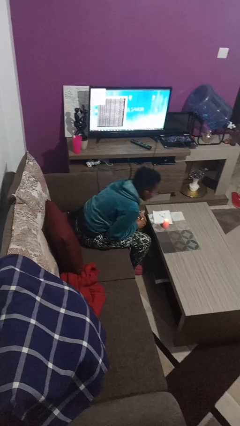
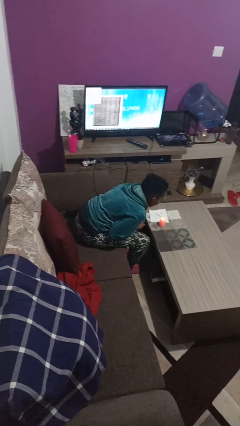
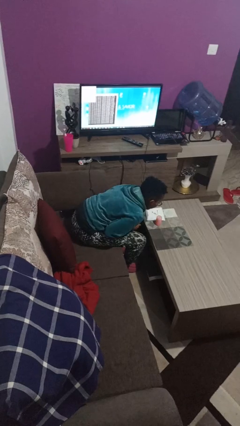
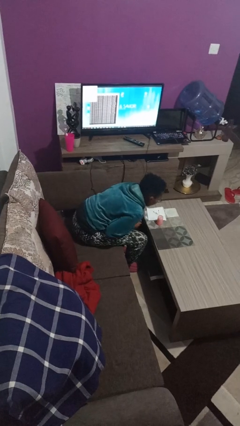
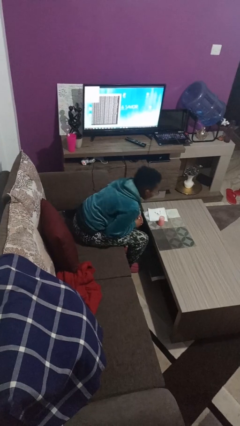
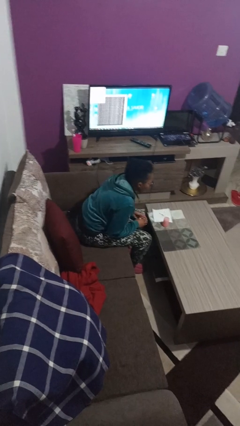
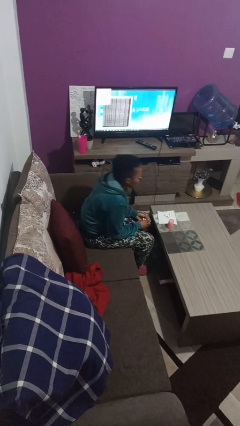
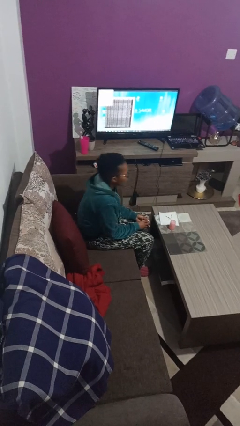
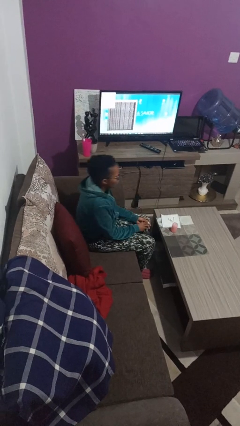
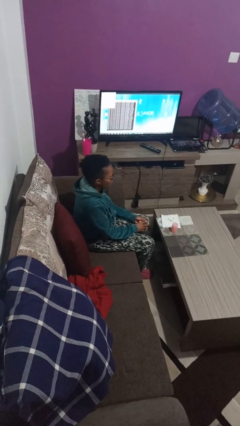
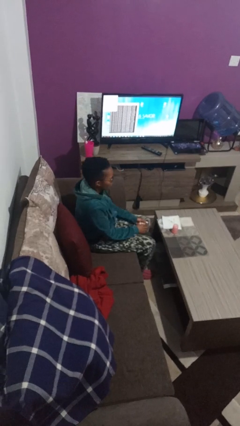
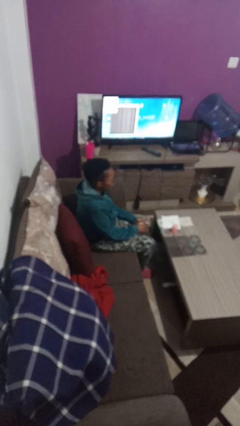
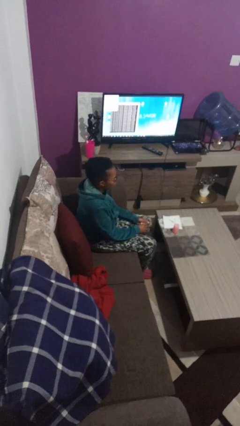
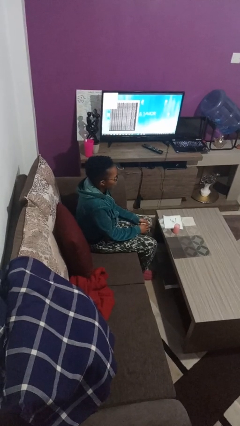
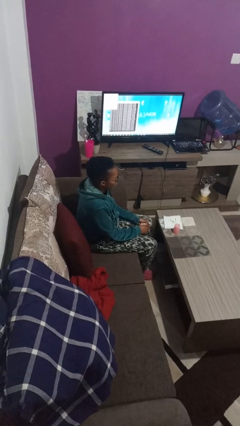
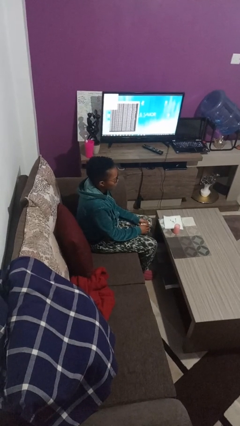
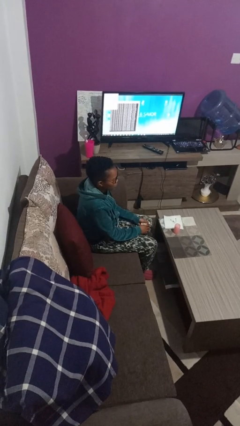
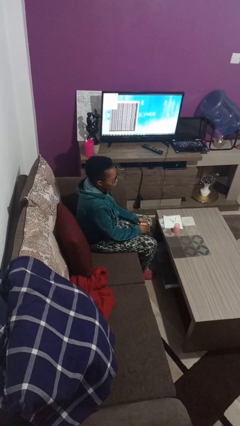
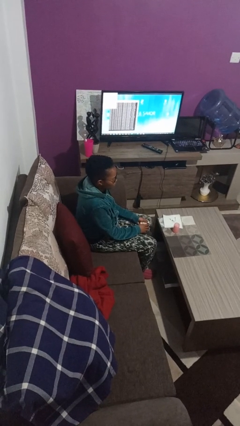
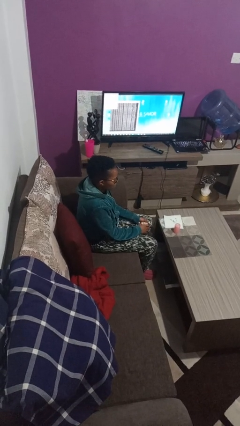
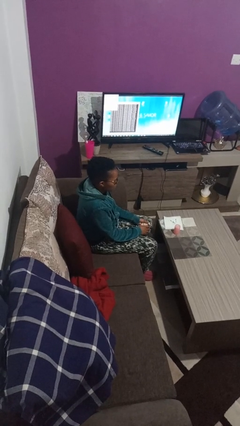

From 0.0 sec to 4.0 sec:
person extinguishes candle

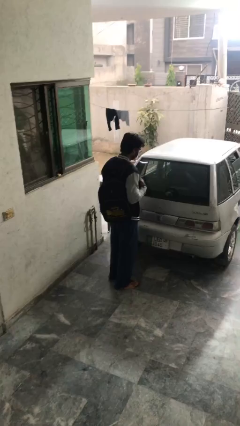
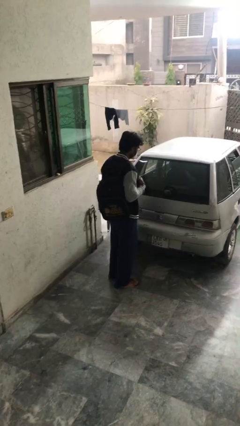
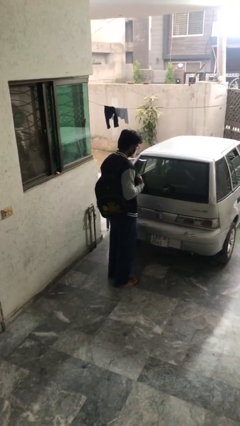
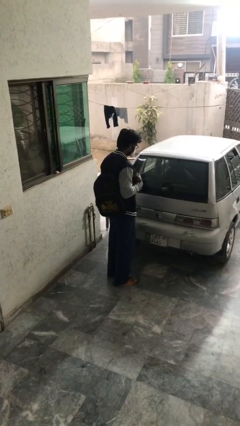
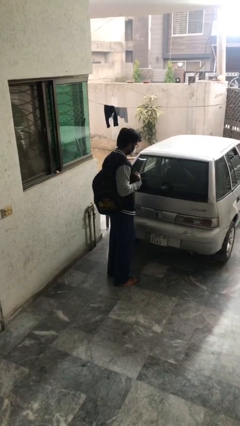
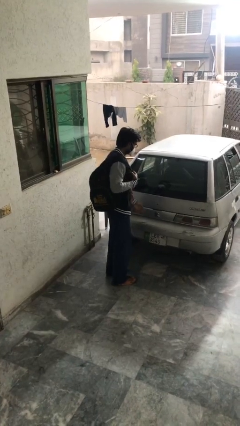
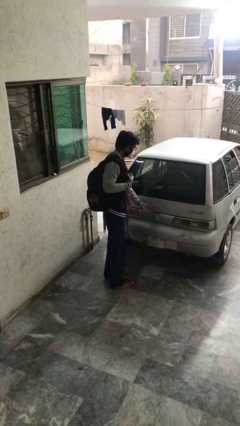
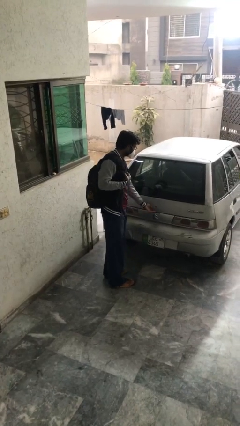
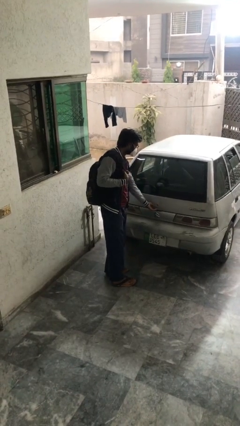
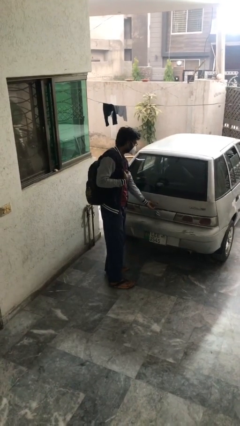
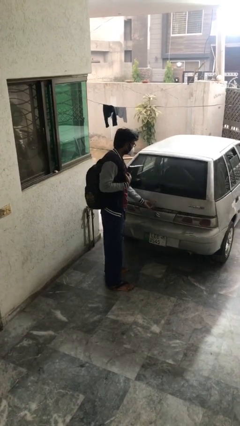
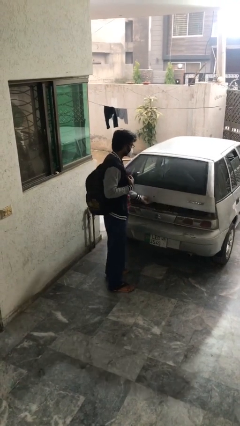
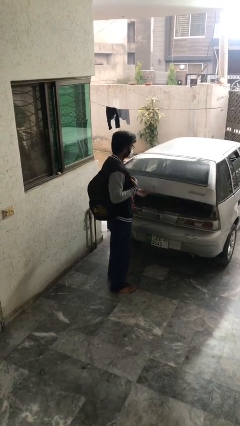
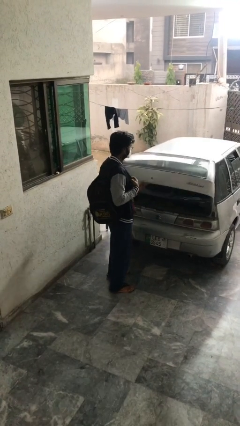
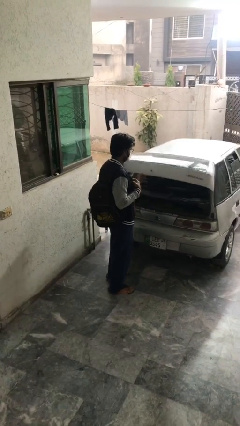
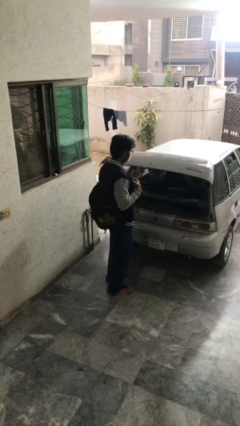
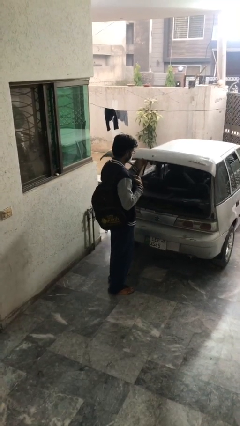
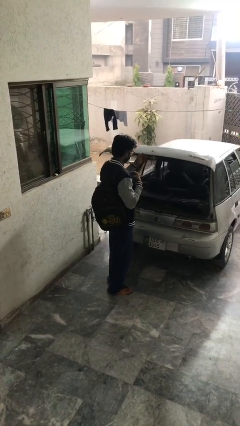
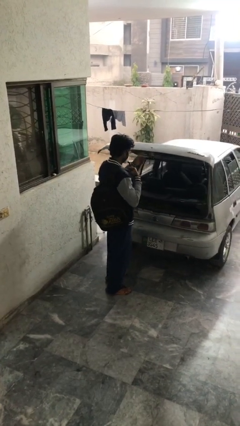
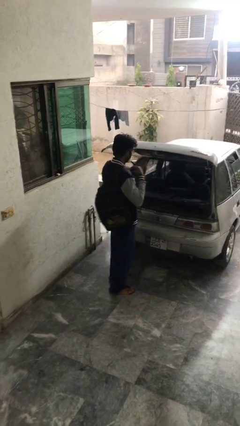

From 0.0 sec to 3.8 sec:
person opens car trunk

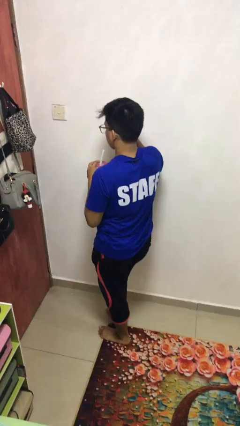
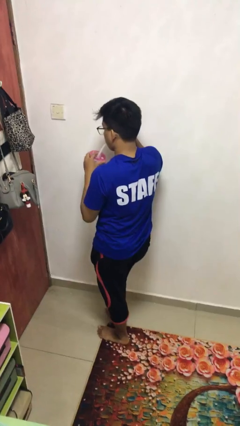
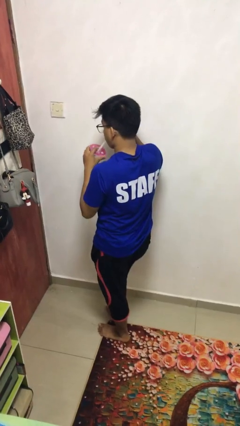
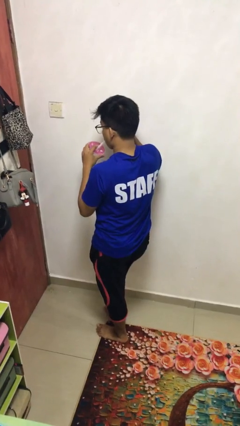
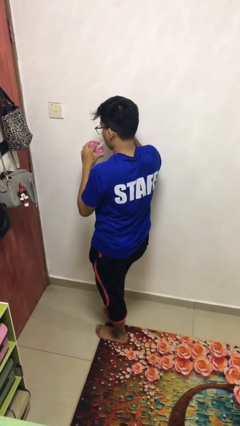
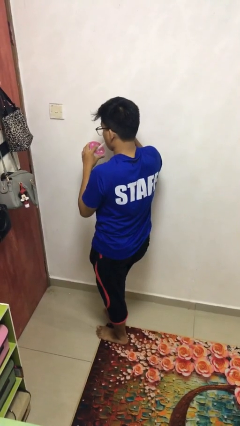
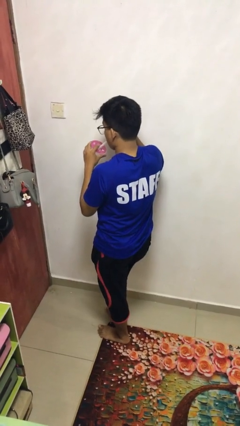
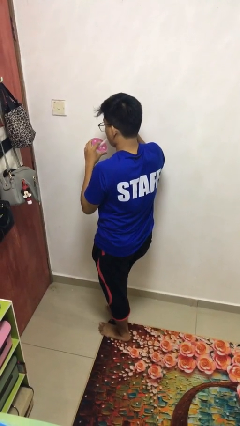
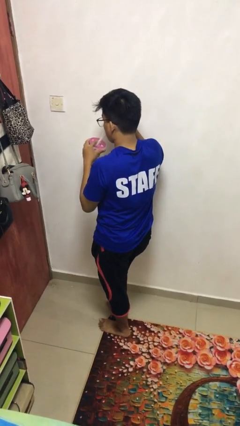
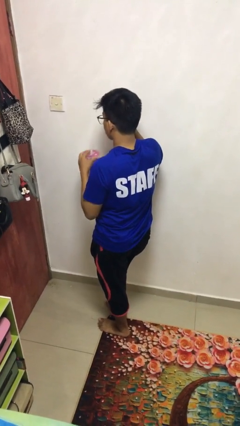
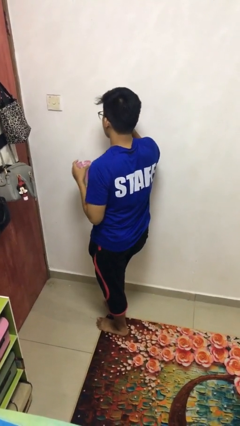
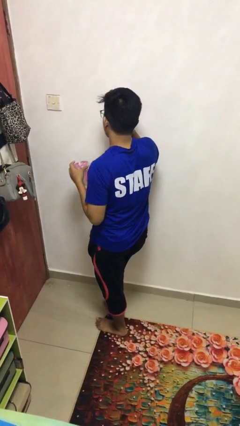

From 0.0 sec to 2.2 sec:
person drinks from straw

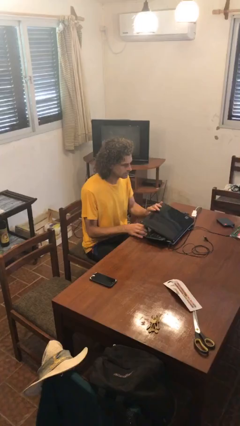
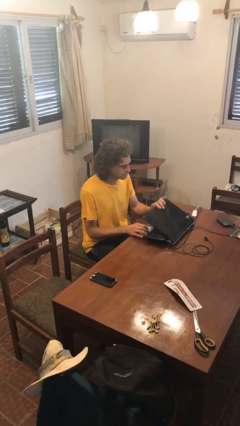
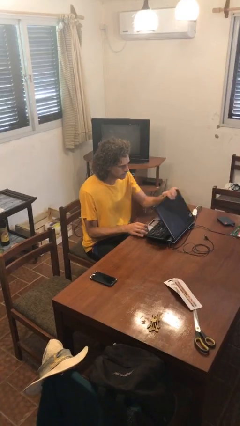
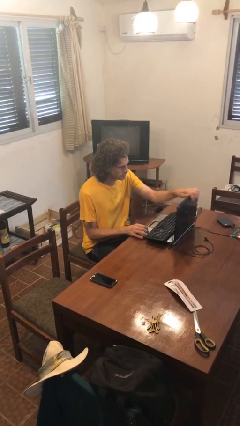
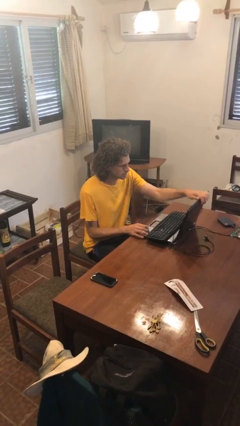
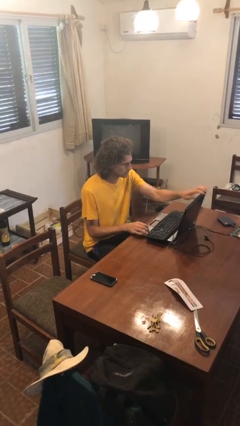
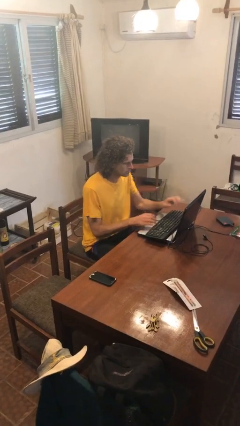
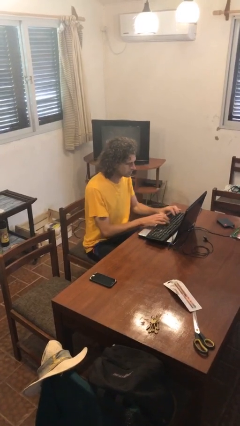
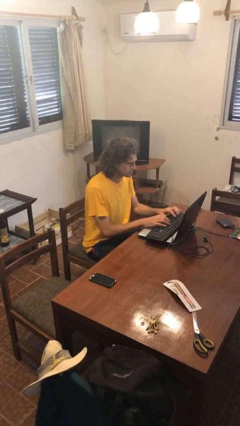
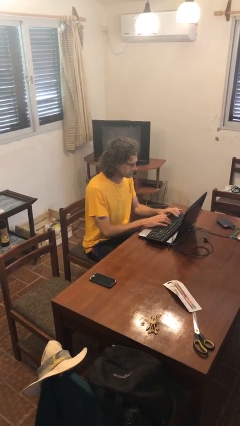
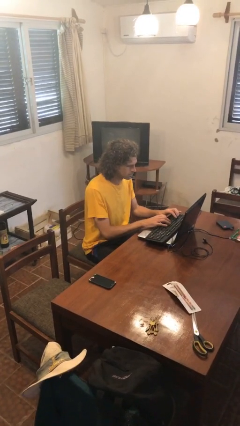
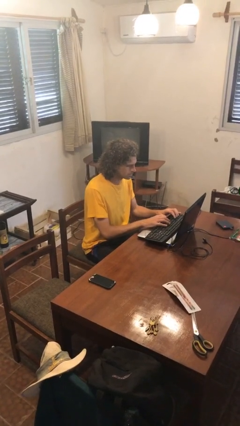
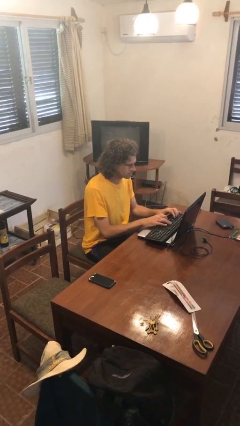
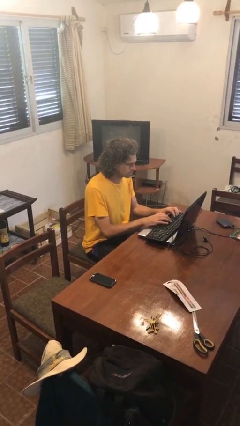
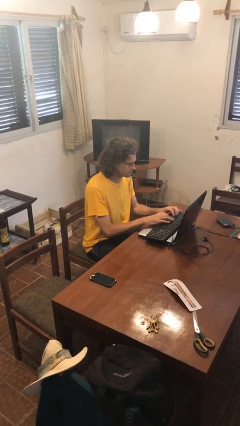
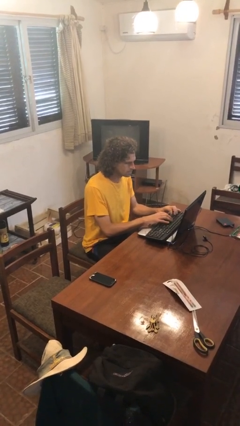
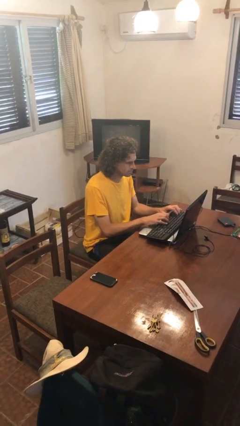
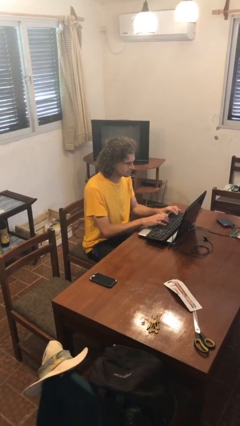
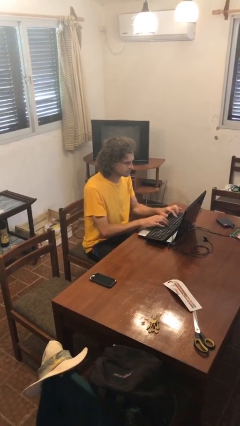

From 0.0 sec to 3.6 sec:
person interacts with laptop

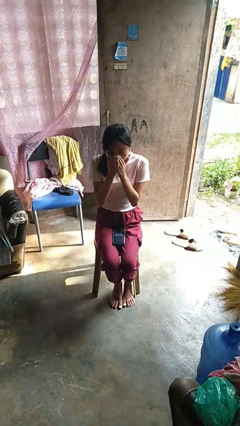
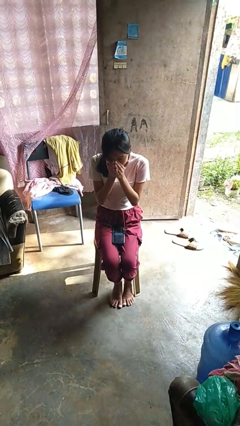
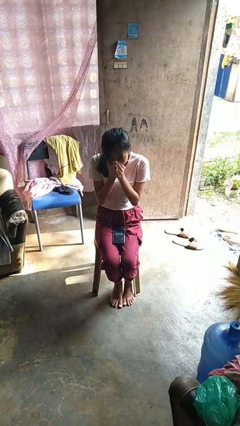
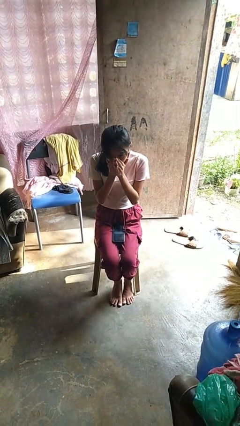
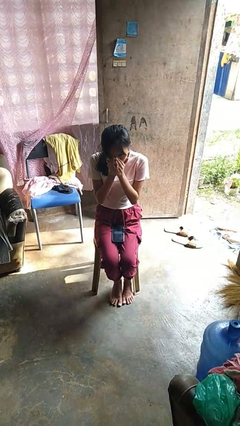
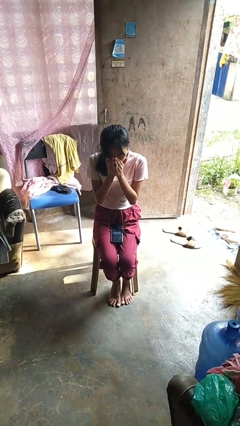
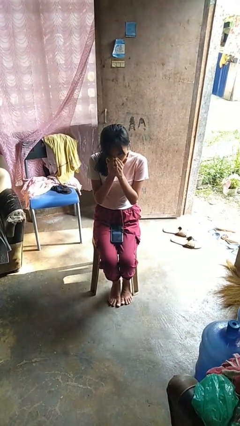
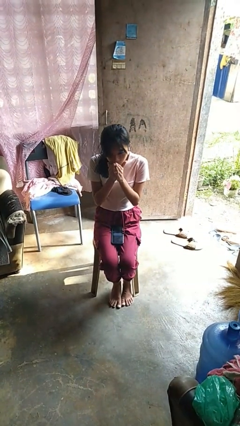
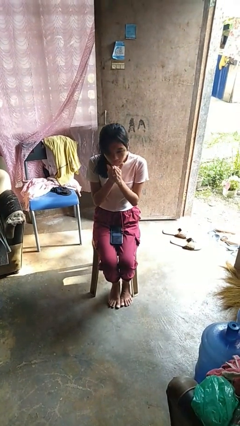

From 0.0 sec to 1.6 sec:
person sneezes into hand

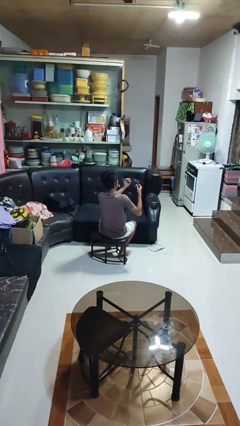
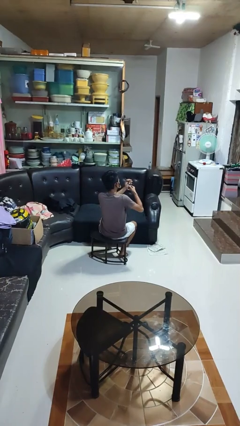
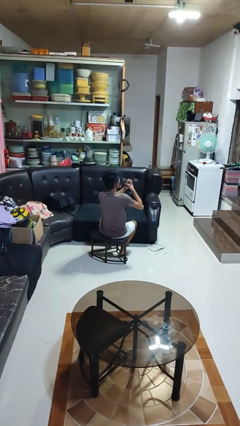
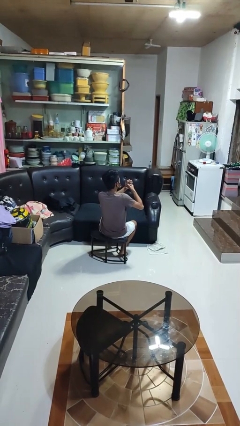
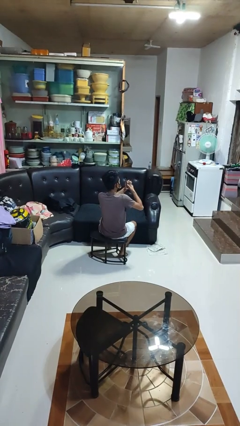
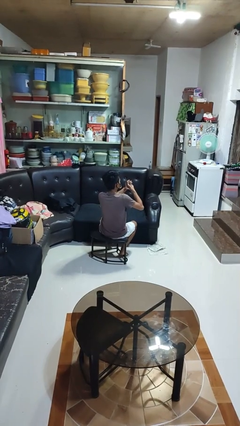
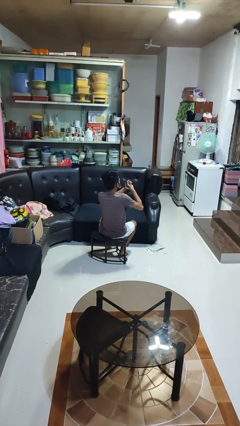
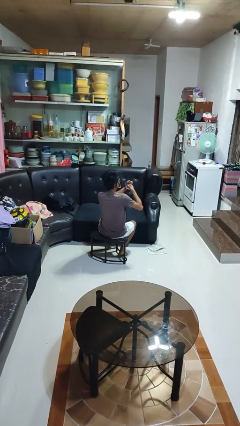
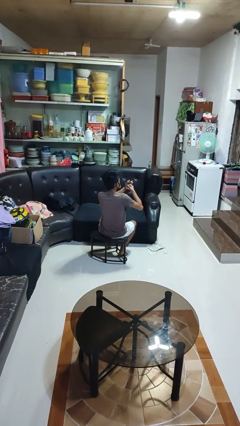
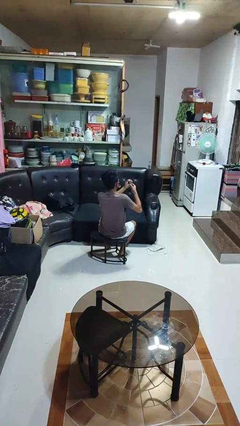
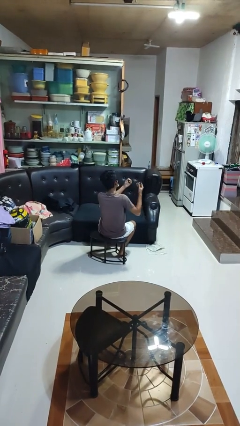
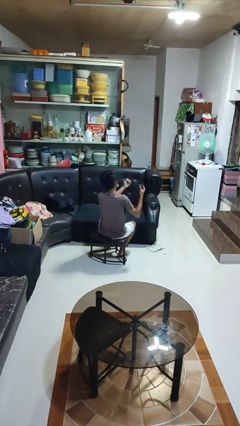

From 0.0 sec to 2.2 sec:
person clips fingernails
